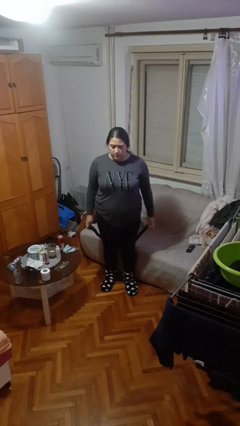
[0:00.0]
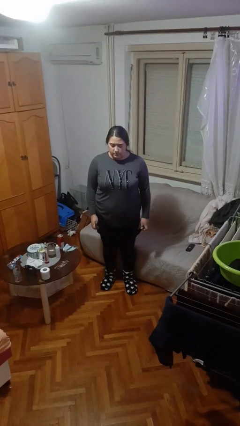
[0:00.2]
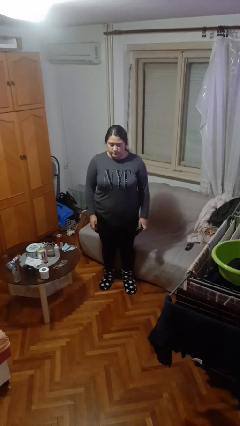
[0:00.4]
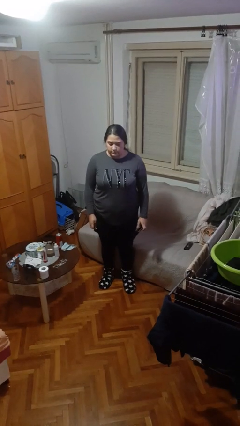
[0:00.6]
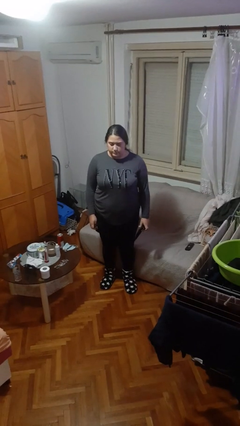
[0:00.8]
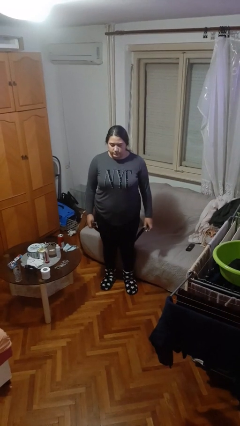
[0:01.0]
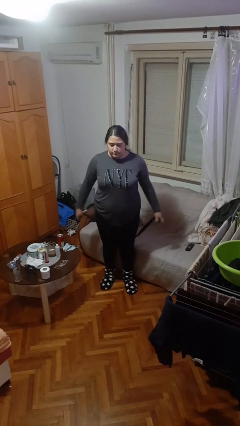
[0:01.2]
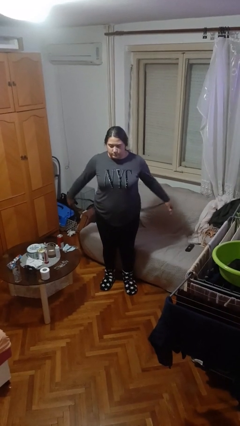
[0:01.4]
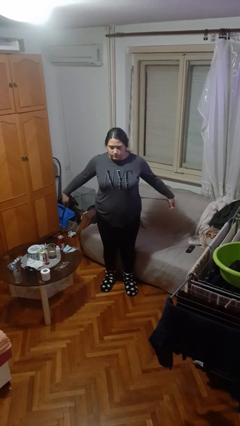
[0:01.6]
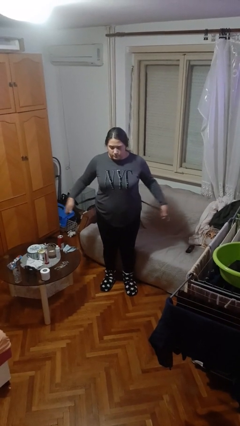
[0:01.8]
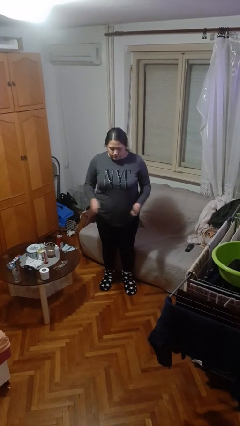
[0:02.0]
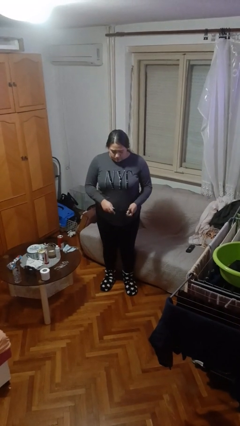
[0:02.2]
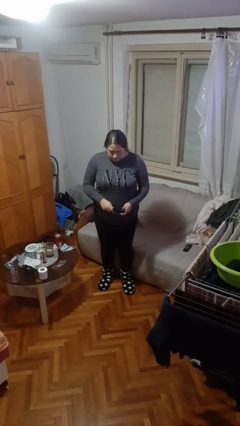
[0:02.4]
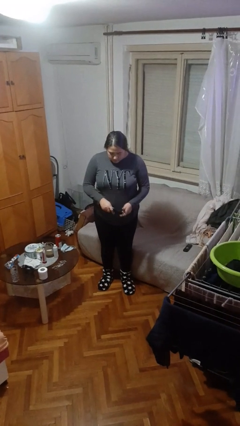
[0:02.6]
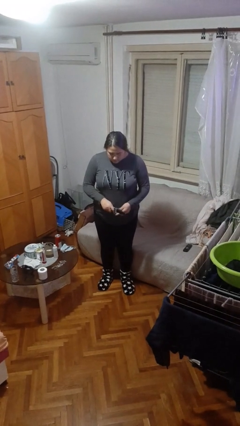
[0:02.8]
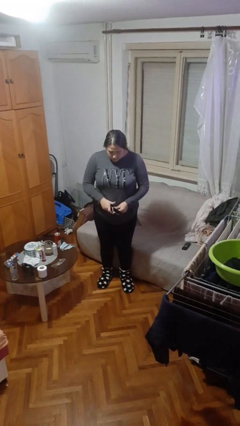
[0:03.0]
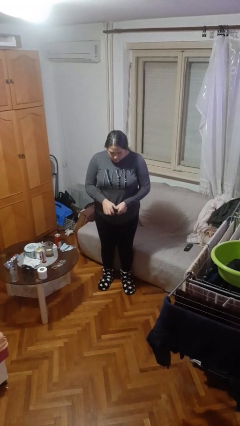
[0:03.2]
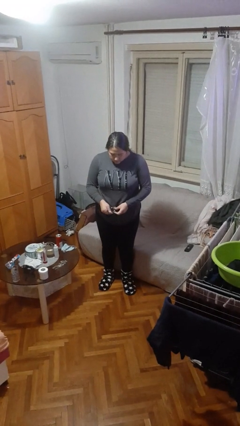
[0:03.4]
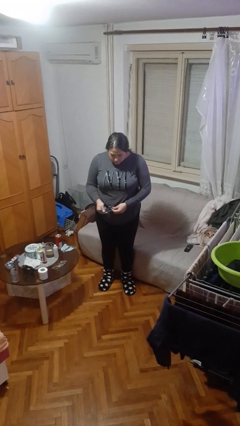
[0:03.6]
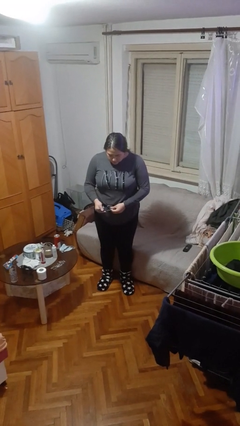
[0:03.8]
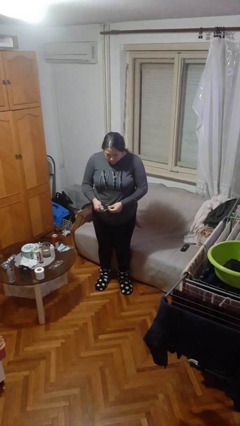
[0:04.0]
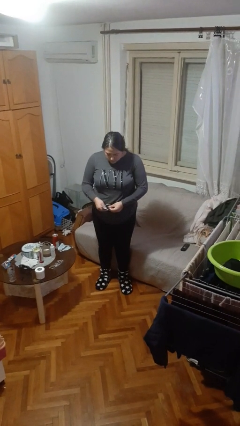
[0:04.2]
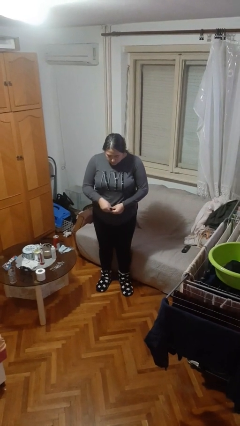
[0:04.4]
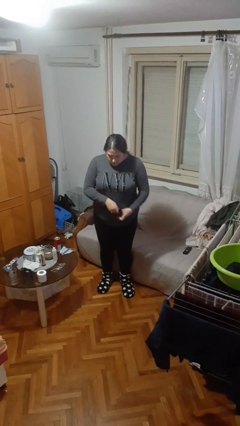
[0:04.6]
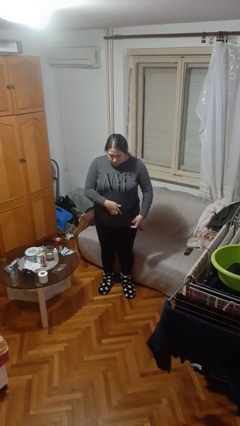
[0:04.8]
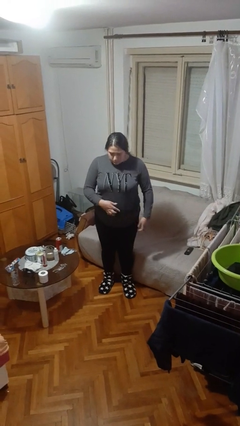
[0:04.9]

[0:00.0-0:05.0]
person puts on belt

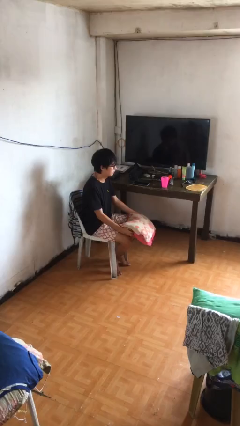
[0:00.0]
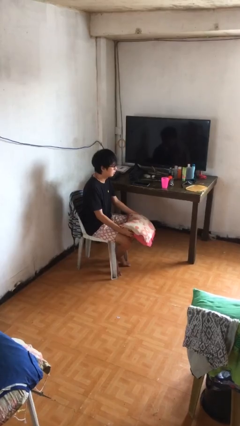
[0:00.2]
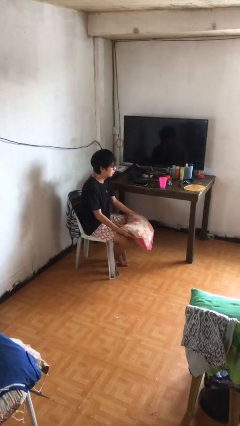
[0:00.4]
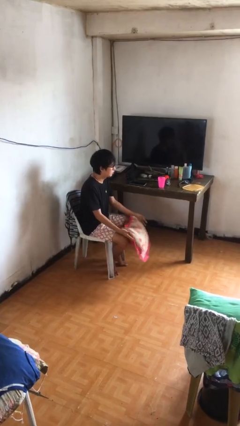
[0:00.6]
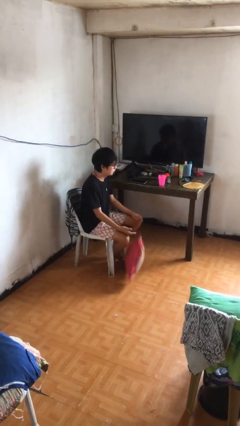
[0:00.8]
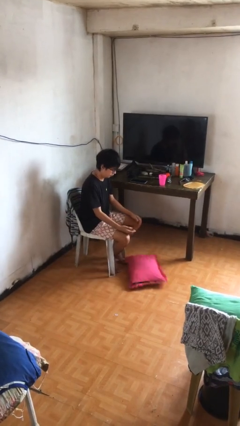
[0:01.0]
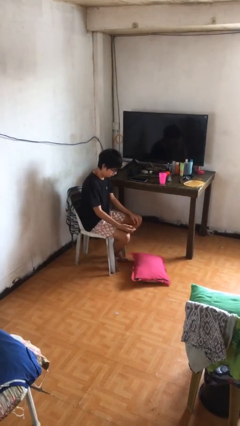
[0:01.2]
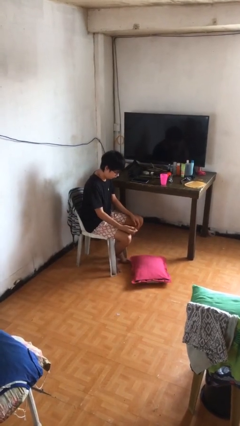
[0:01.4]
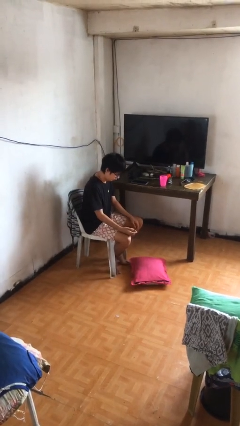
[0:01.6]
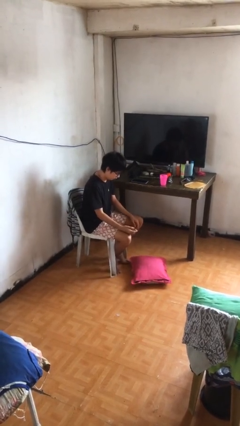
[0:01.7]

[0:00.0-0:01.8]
person drops object

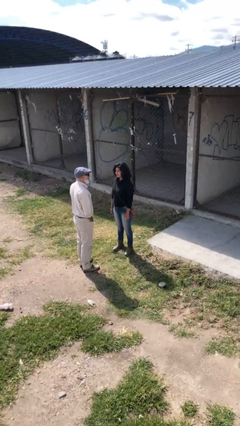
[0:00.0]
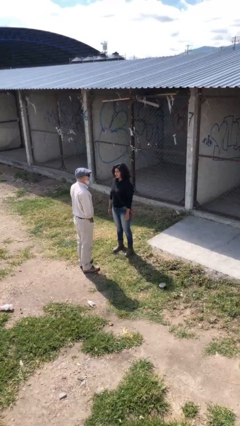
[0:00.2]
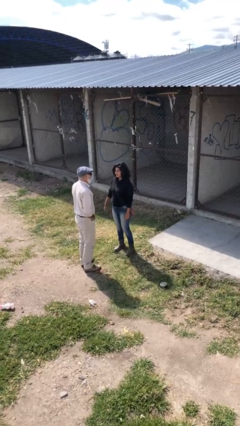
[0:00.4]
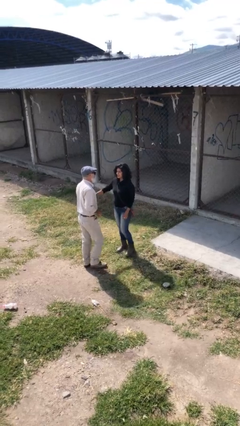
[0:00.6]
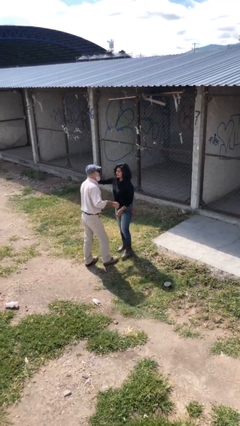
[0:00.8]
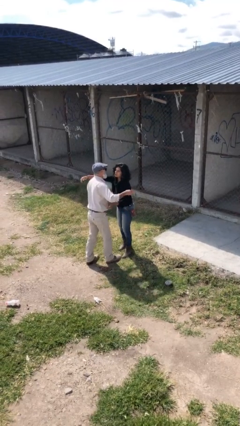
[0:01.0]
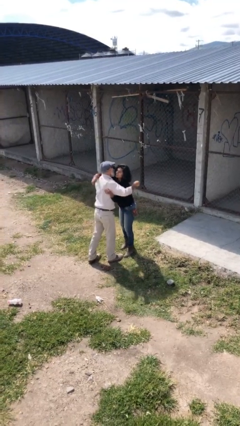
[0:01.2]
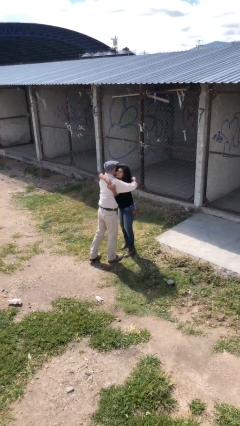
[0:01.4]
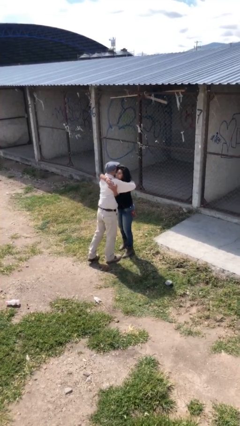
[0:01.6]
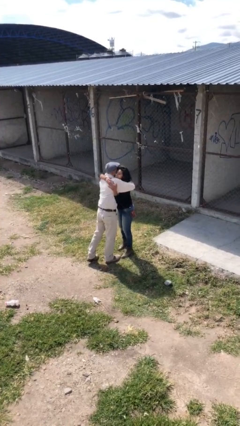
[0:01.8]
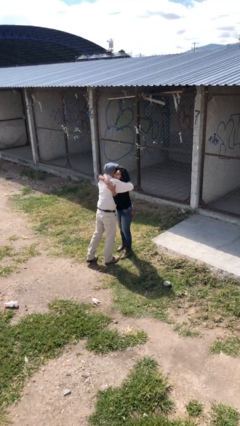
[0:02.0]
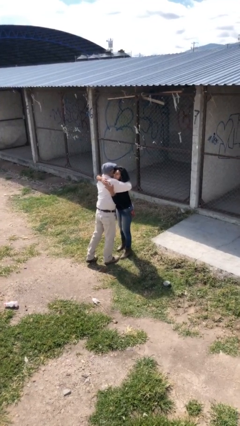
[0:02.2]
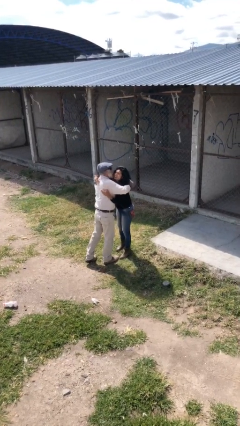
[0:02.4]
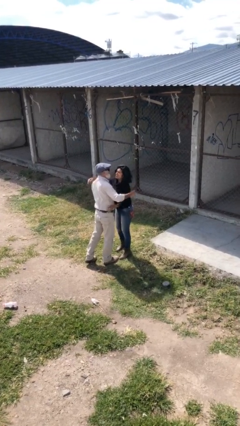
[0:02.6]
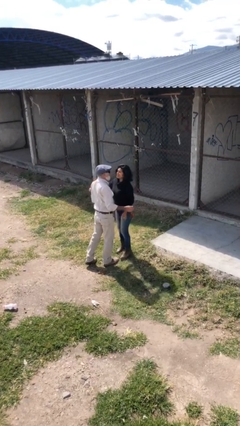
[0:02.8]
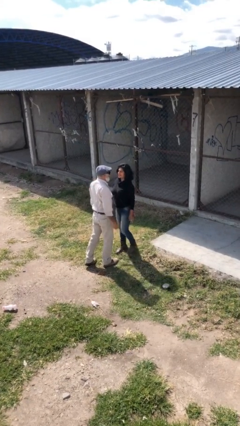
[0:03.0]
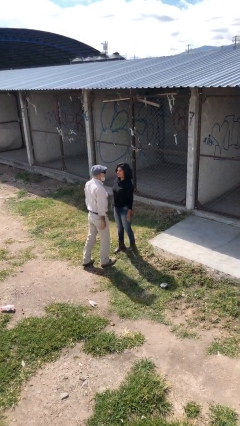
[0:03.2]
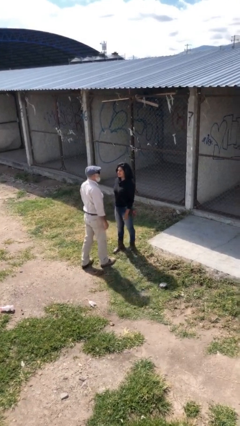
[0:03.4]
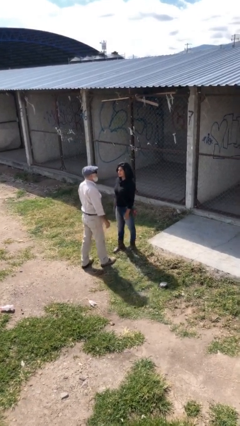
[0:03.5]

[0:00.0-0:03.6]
person embraces person

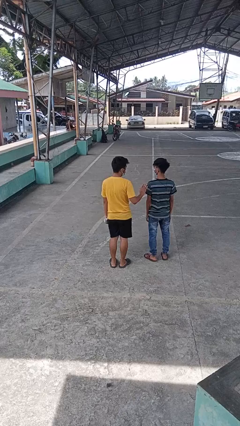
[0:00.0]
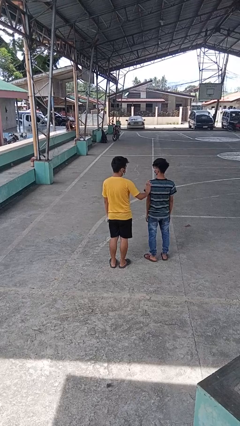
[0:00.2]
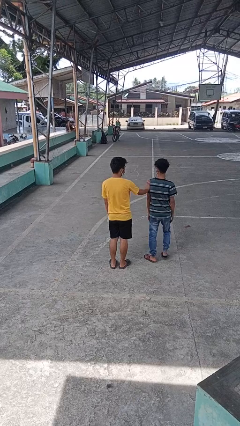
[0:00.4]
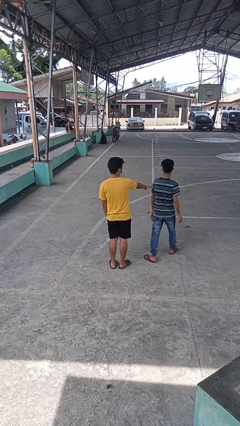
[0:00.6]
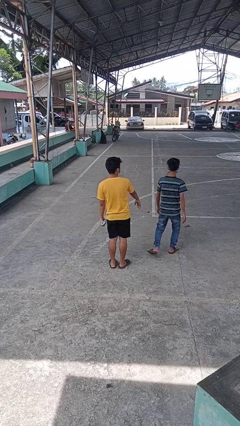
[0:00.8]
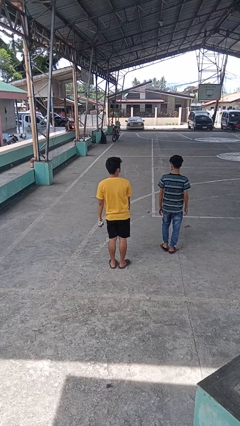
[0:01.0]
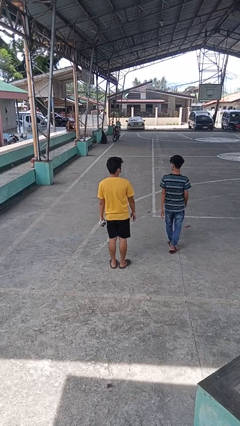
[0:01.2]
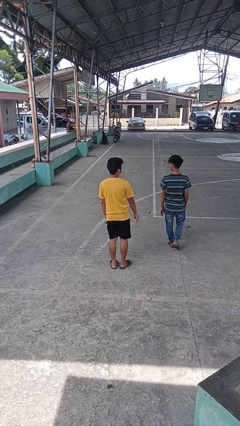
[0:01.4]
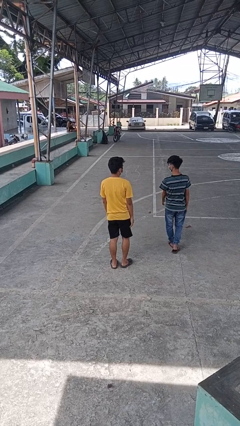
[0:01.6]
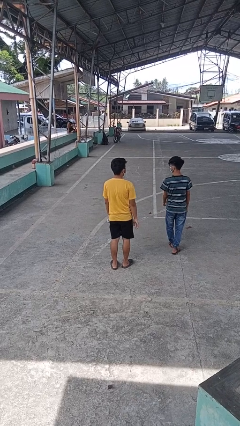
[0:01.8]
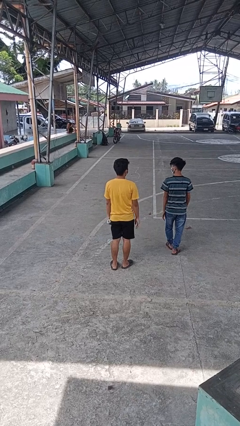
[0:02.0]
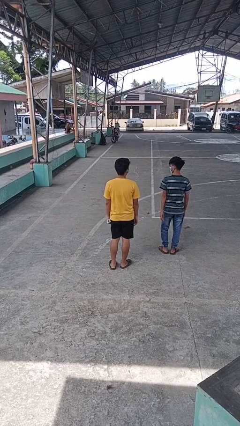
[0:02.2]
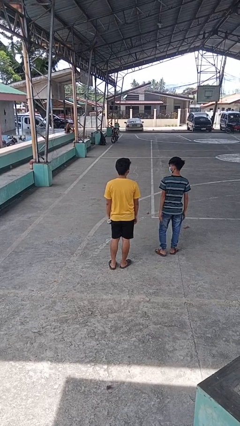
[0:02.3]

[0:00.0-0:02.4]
person shoves person

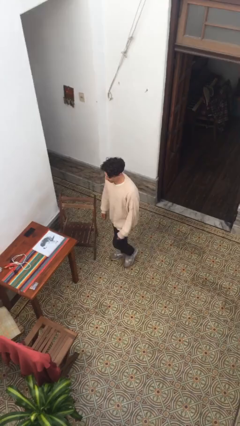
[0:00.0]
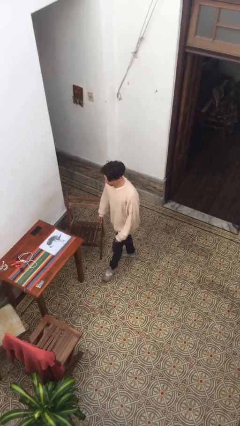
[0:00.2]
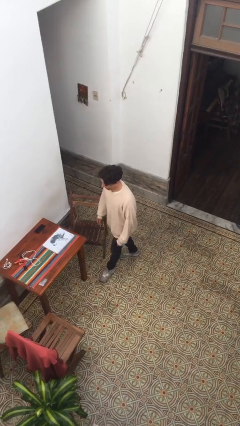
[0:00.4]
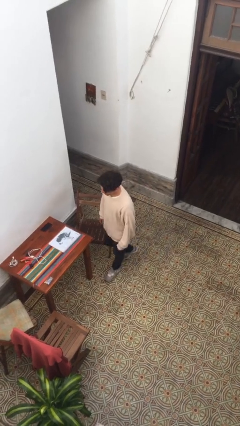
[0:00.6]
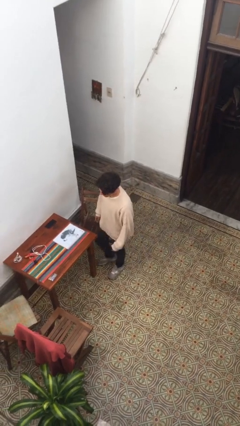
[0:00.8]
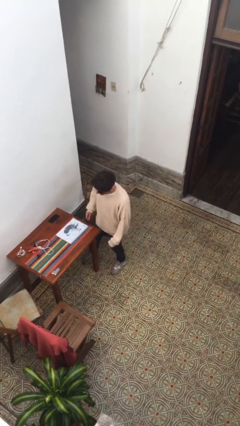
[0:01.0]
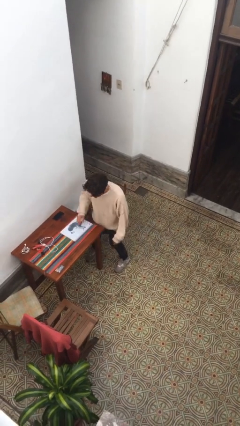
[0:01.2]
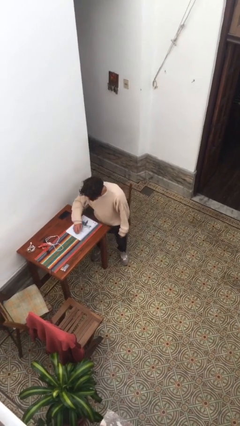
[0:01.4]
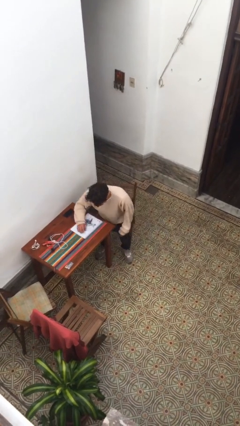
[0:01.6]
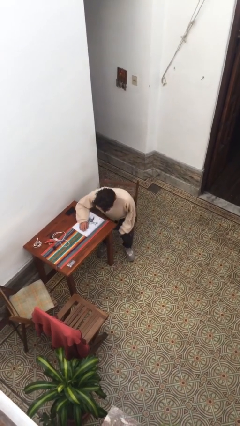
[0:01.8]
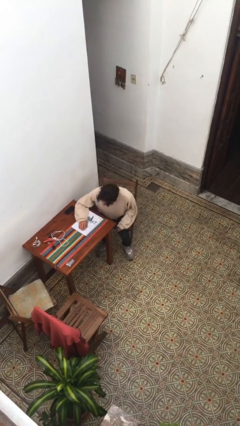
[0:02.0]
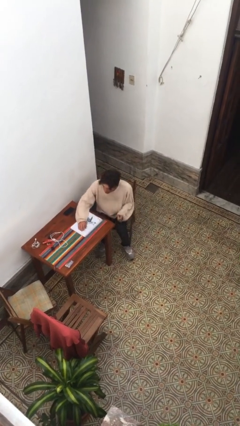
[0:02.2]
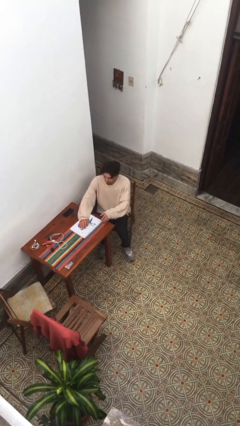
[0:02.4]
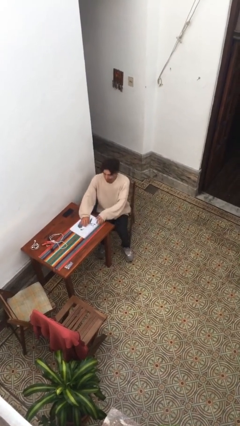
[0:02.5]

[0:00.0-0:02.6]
person sits down

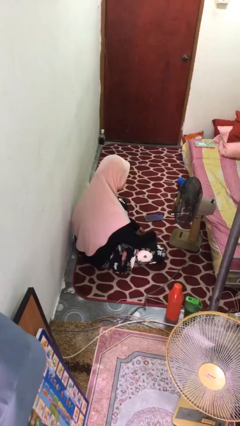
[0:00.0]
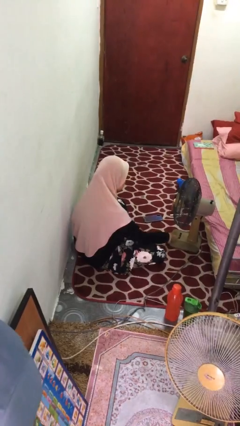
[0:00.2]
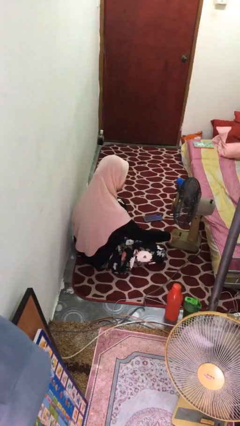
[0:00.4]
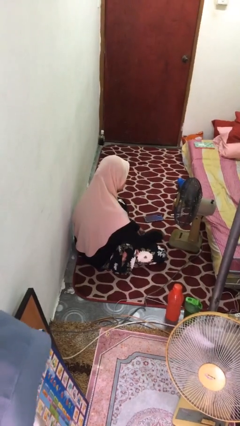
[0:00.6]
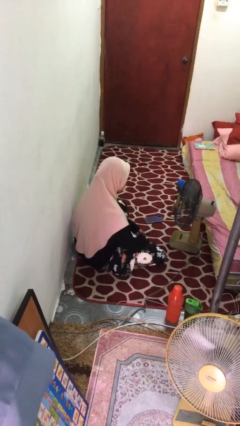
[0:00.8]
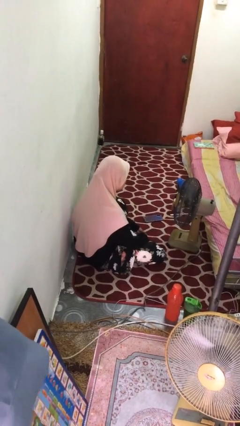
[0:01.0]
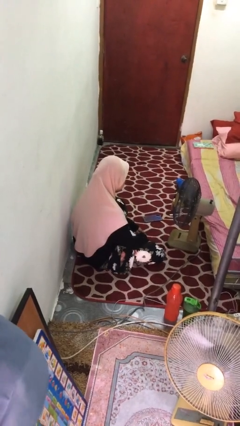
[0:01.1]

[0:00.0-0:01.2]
person turns off fan

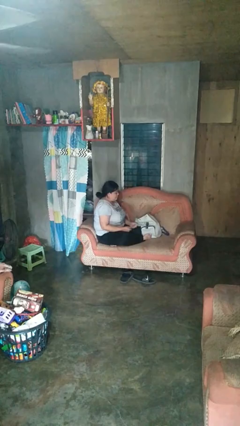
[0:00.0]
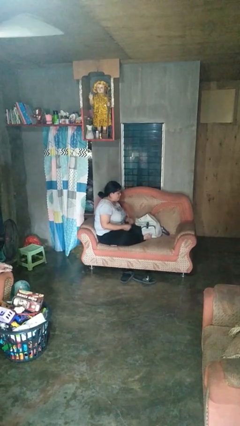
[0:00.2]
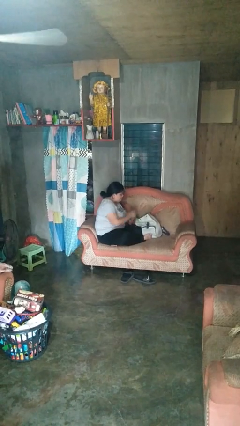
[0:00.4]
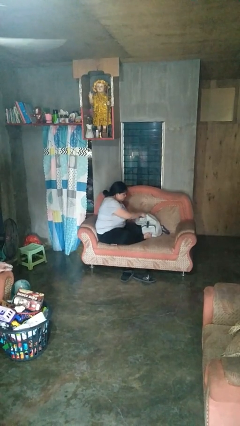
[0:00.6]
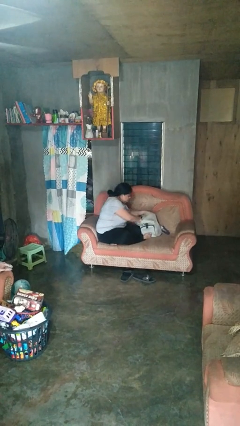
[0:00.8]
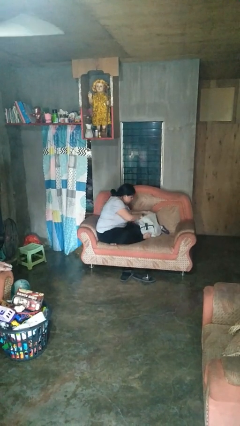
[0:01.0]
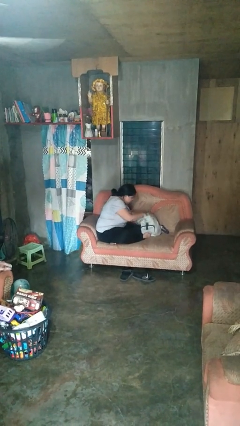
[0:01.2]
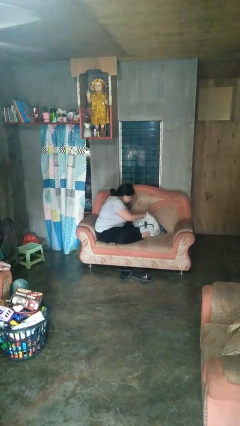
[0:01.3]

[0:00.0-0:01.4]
person searches in backpack
